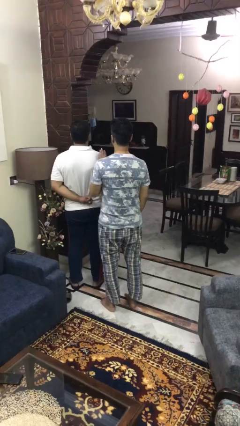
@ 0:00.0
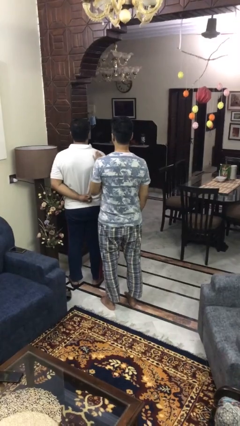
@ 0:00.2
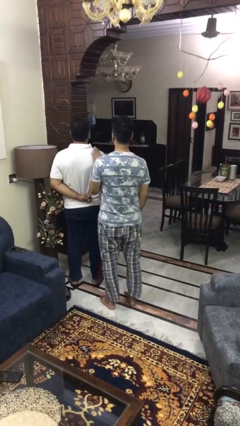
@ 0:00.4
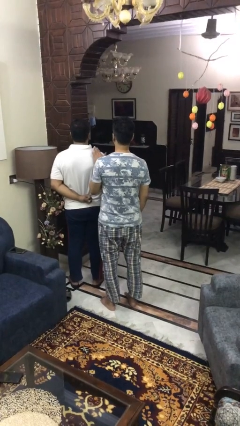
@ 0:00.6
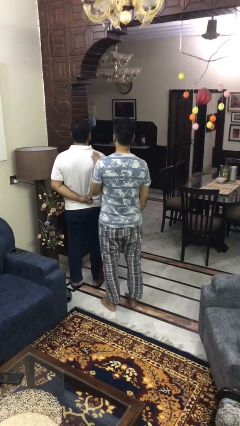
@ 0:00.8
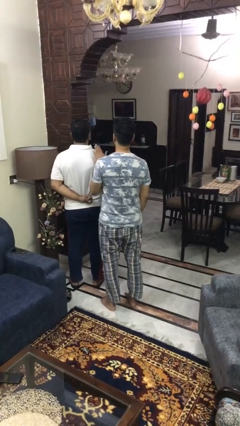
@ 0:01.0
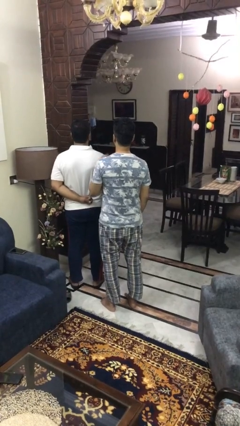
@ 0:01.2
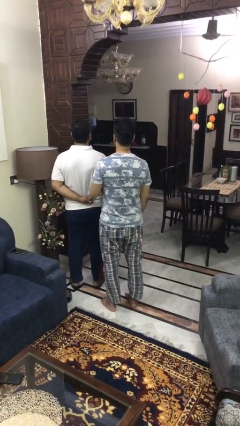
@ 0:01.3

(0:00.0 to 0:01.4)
person touches back of person

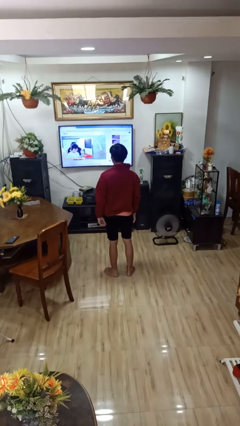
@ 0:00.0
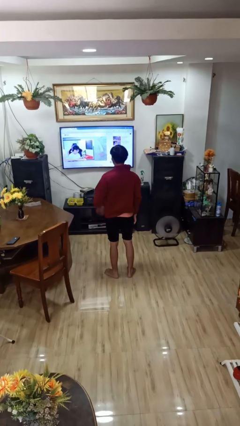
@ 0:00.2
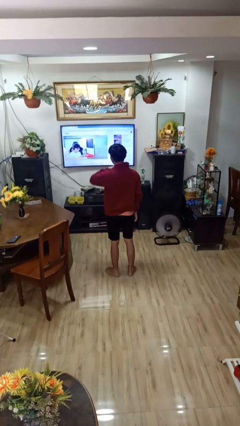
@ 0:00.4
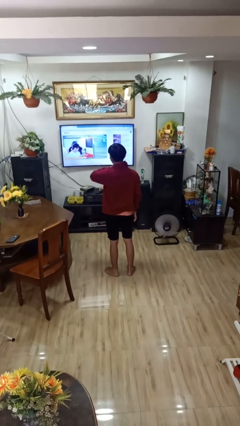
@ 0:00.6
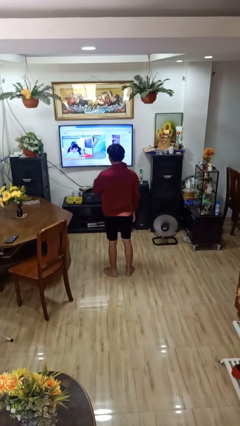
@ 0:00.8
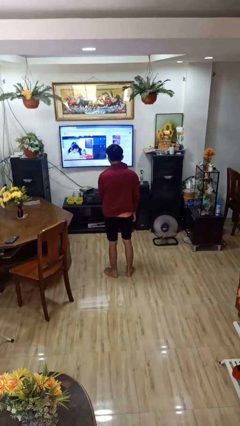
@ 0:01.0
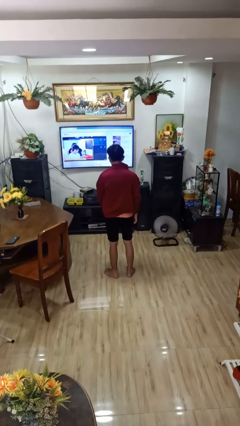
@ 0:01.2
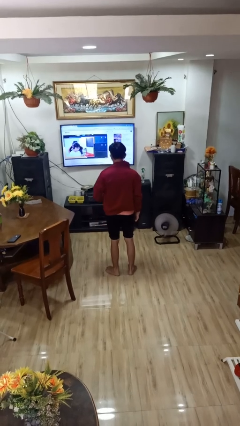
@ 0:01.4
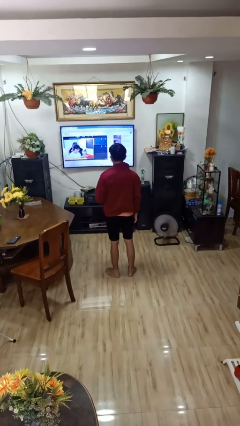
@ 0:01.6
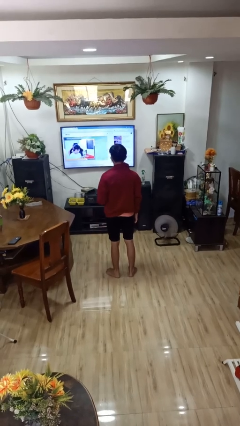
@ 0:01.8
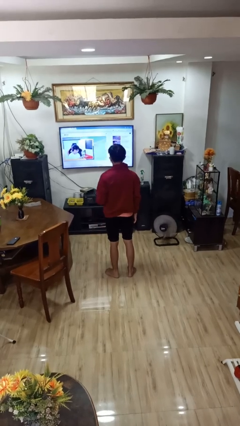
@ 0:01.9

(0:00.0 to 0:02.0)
person unzips jacket

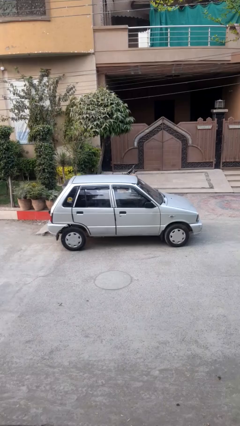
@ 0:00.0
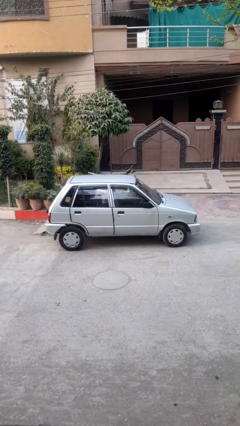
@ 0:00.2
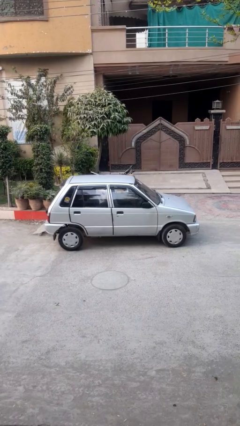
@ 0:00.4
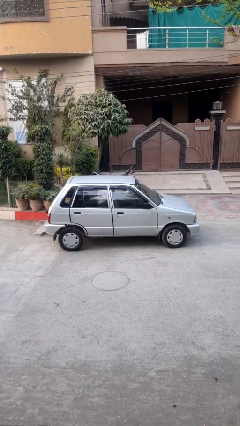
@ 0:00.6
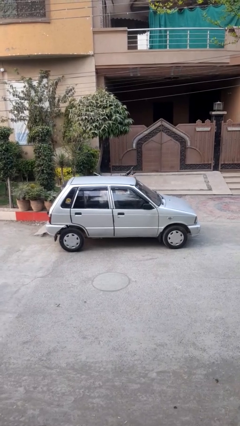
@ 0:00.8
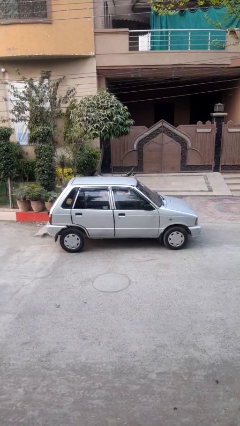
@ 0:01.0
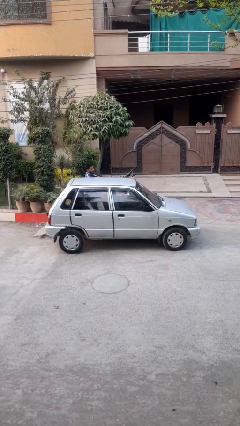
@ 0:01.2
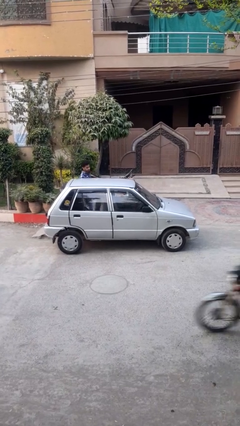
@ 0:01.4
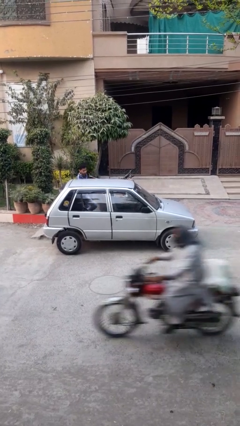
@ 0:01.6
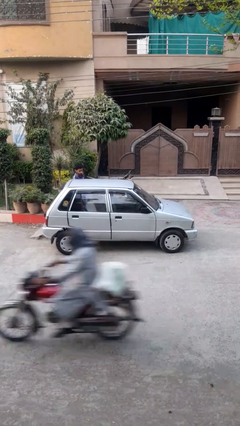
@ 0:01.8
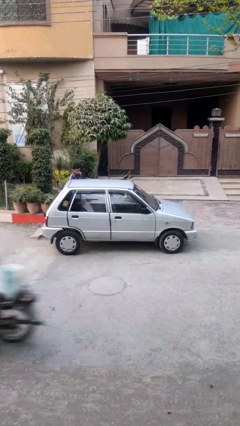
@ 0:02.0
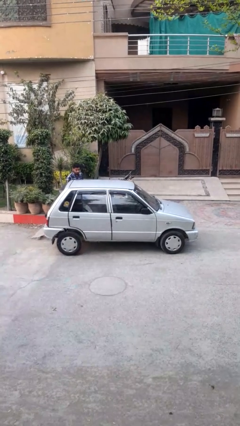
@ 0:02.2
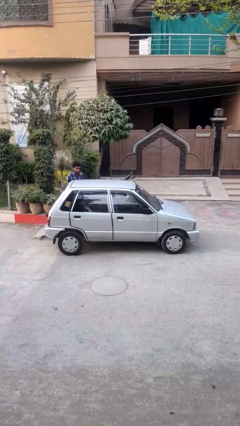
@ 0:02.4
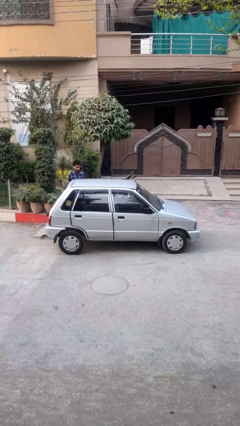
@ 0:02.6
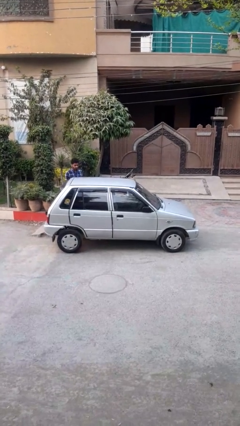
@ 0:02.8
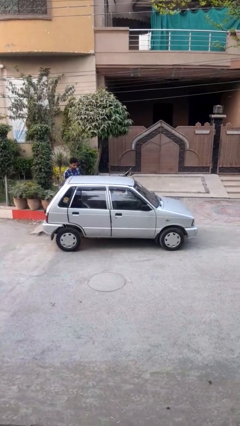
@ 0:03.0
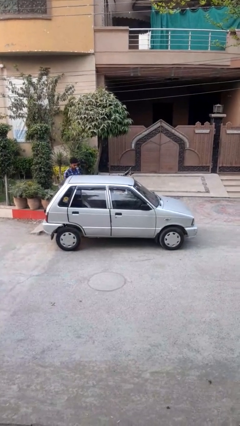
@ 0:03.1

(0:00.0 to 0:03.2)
car drops off person

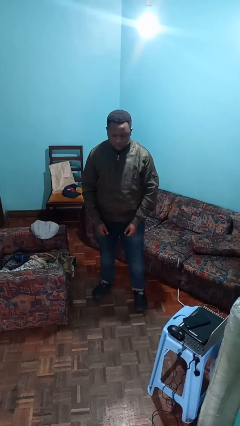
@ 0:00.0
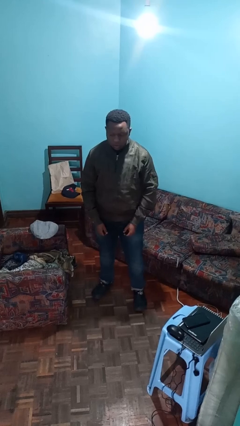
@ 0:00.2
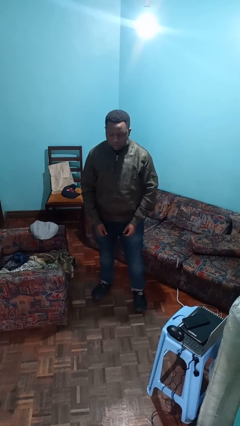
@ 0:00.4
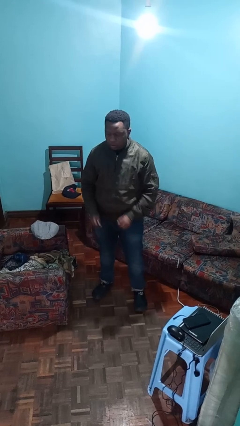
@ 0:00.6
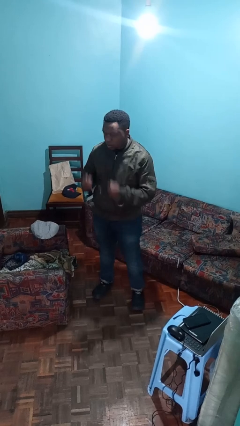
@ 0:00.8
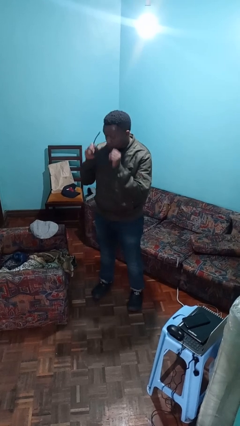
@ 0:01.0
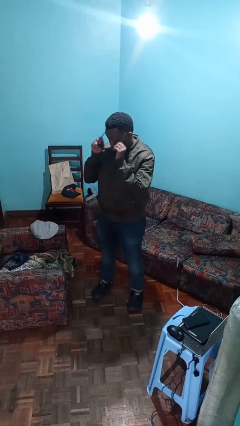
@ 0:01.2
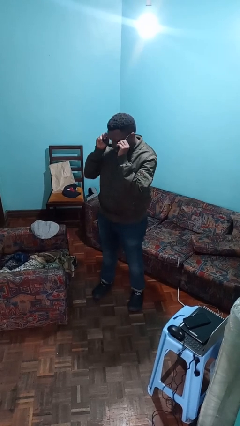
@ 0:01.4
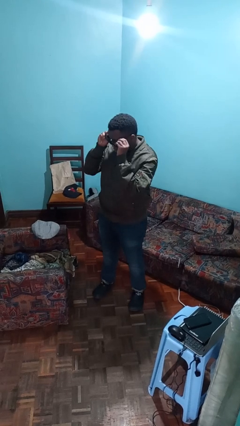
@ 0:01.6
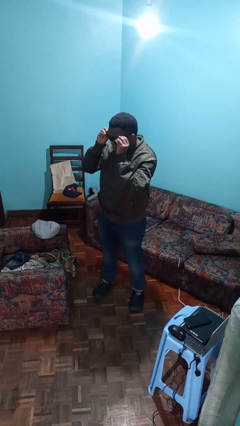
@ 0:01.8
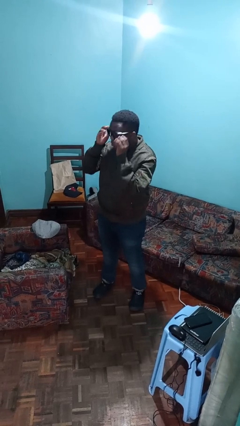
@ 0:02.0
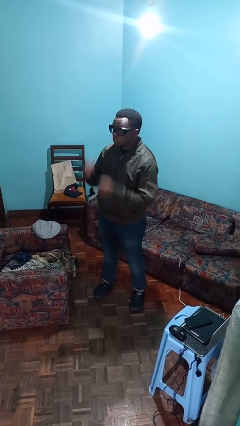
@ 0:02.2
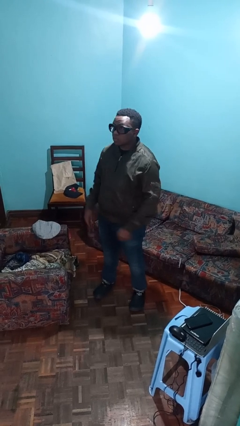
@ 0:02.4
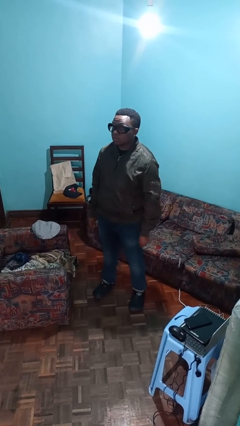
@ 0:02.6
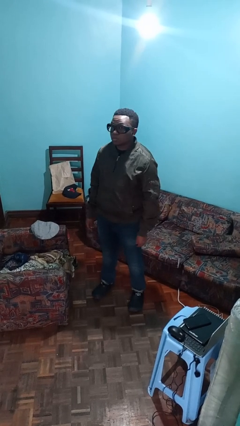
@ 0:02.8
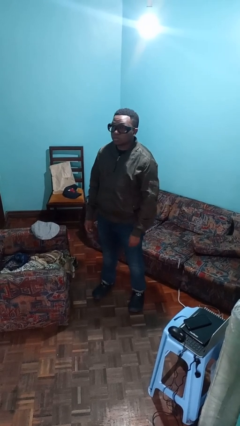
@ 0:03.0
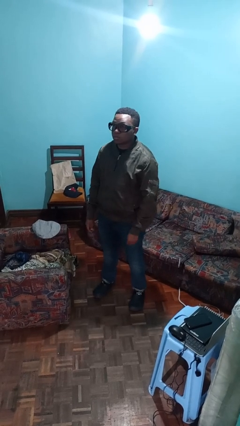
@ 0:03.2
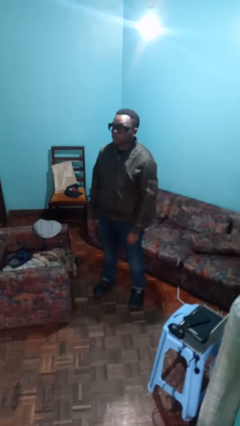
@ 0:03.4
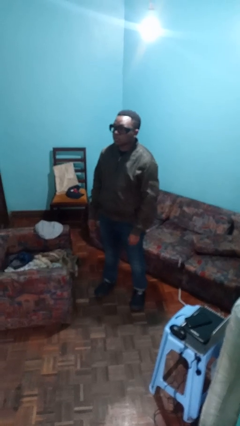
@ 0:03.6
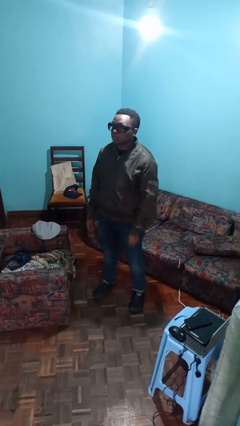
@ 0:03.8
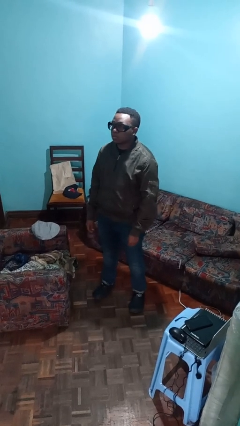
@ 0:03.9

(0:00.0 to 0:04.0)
person puts on glasses

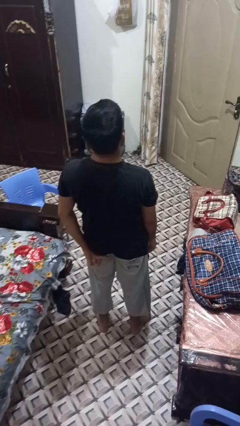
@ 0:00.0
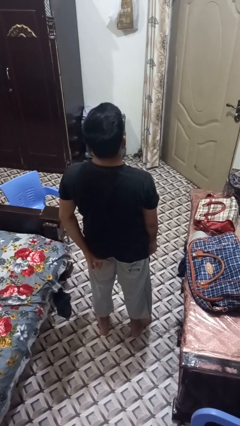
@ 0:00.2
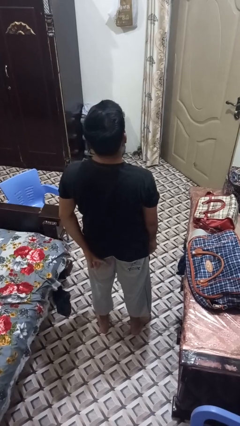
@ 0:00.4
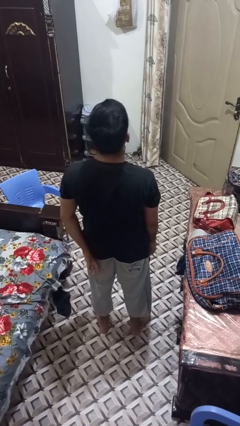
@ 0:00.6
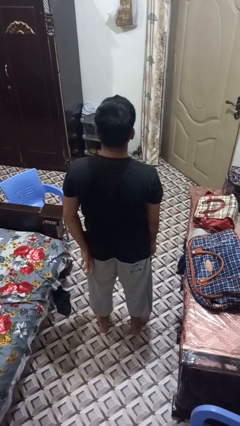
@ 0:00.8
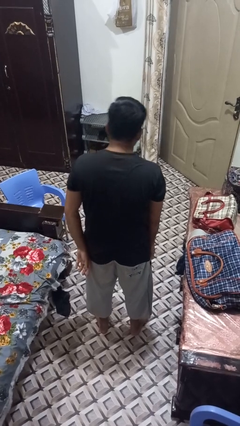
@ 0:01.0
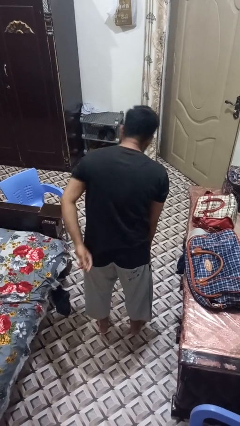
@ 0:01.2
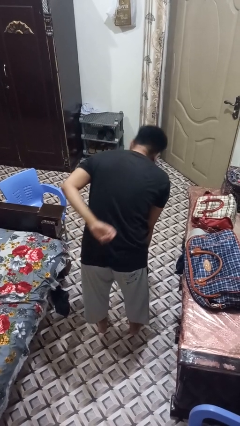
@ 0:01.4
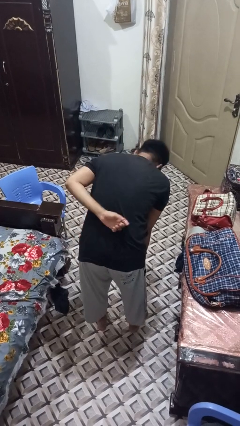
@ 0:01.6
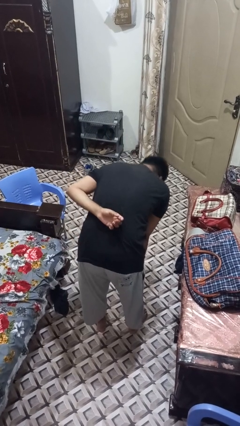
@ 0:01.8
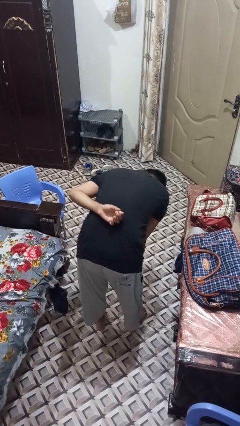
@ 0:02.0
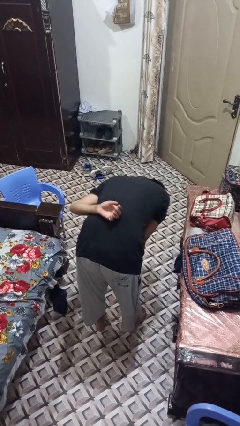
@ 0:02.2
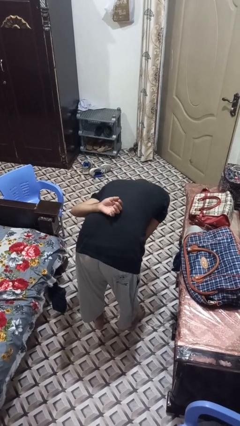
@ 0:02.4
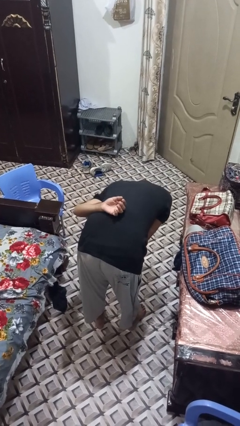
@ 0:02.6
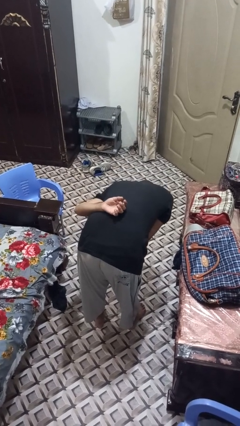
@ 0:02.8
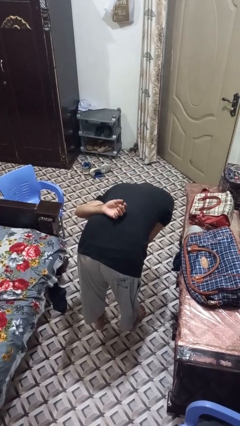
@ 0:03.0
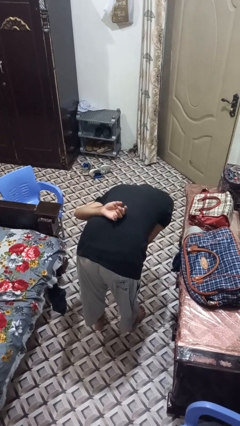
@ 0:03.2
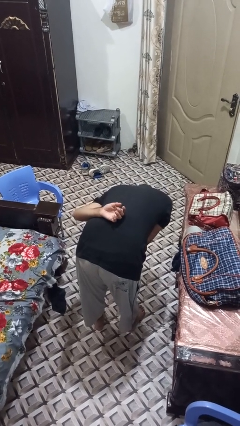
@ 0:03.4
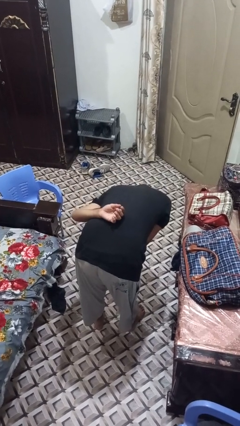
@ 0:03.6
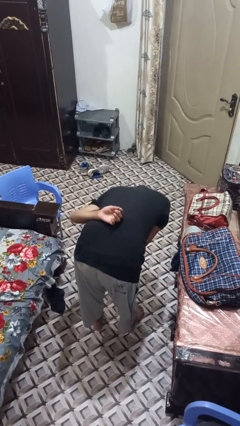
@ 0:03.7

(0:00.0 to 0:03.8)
person kneels

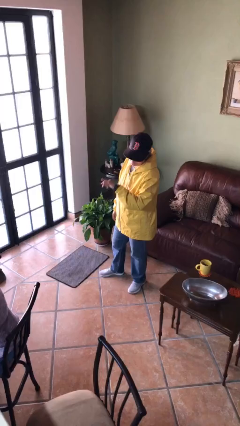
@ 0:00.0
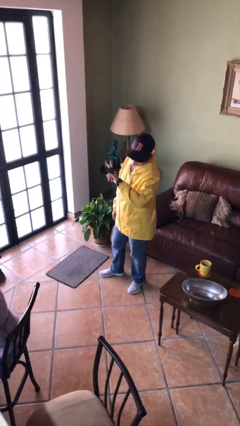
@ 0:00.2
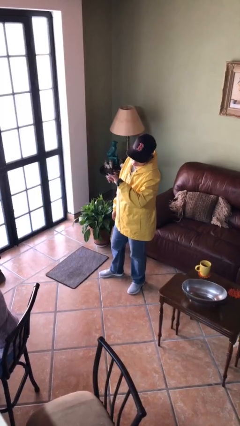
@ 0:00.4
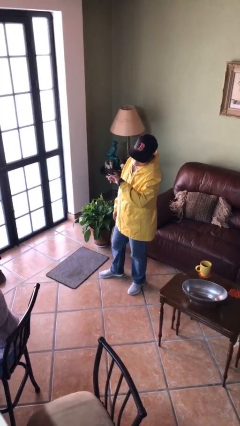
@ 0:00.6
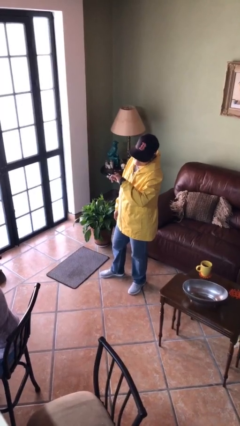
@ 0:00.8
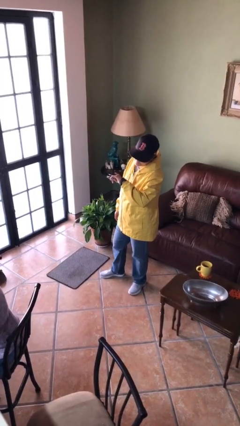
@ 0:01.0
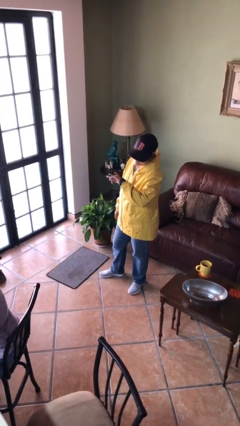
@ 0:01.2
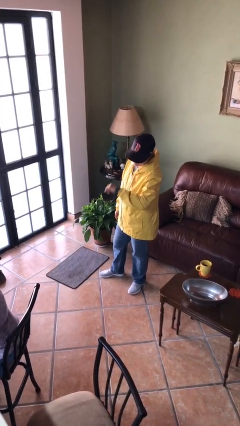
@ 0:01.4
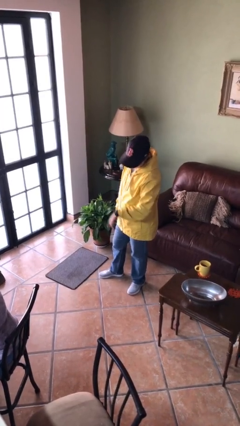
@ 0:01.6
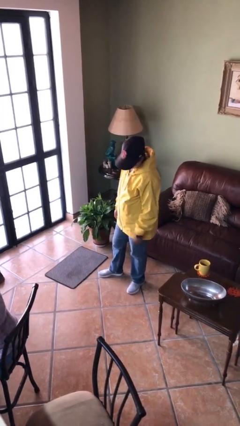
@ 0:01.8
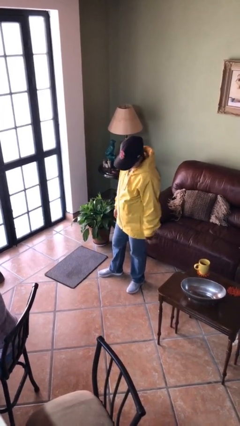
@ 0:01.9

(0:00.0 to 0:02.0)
person looks at wristwatch

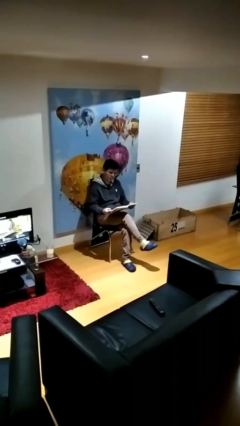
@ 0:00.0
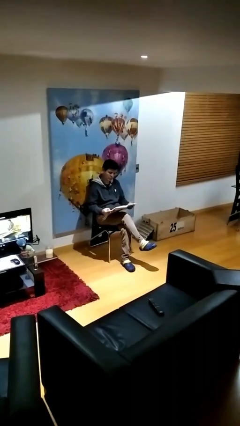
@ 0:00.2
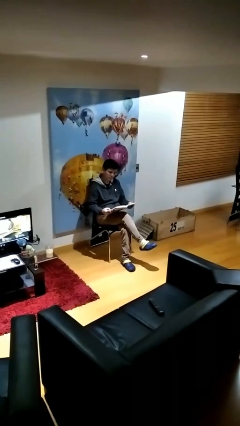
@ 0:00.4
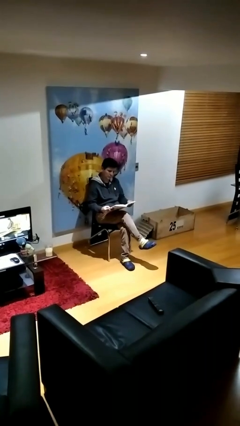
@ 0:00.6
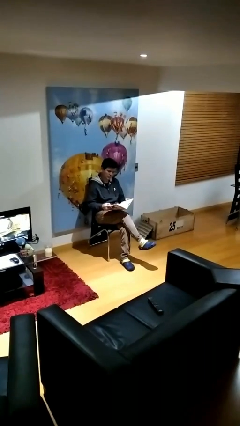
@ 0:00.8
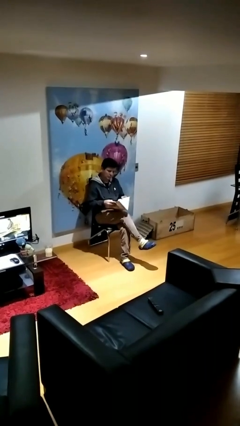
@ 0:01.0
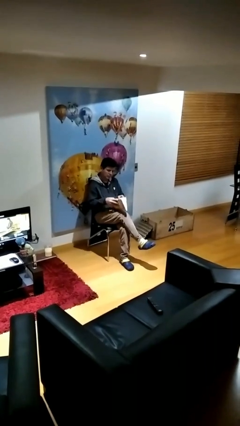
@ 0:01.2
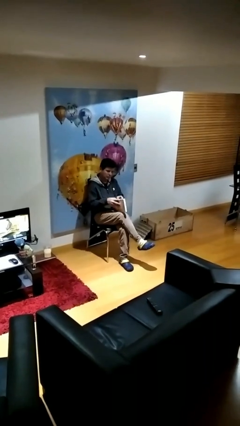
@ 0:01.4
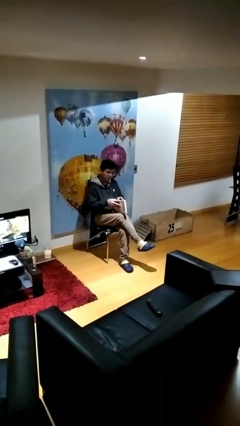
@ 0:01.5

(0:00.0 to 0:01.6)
person reads document
